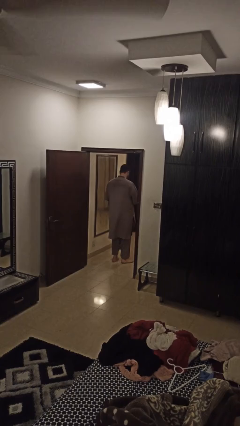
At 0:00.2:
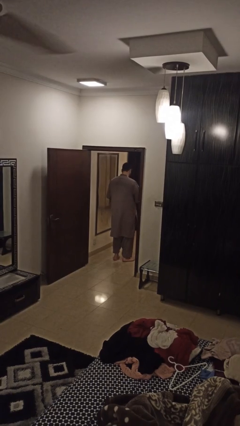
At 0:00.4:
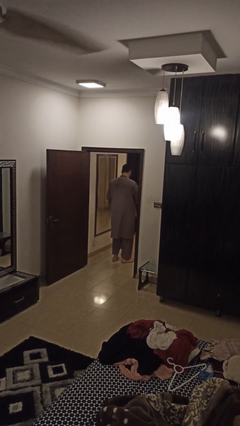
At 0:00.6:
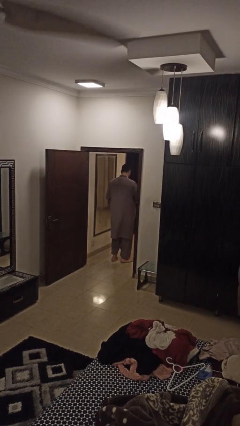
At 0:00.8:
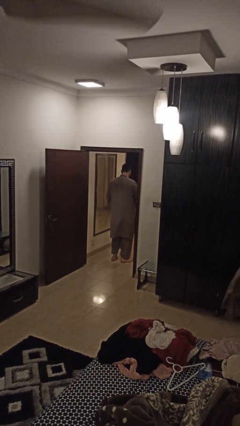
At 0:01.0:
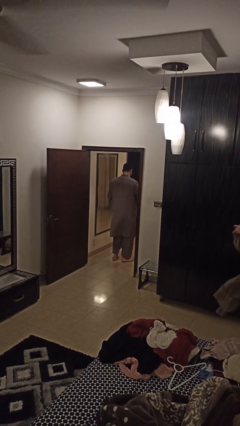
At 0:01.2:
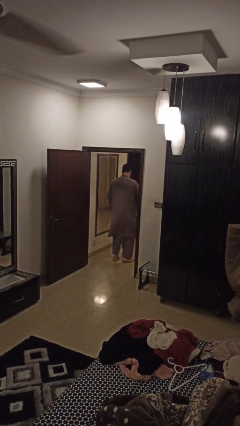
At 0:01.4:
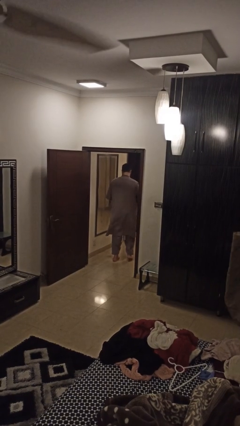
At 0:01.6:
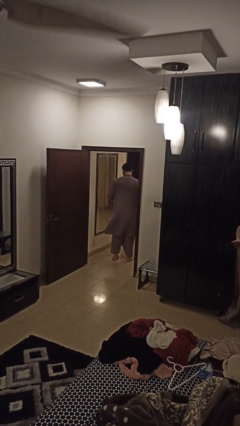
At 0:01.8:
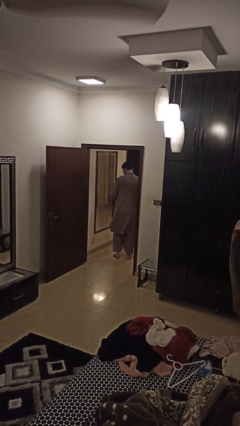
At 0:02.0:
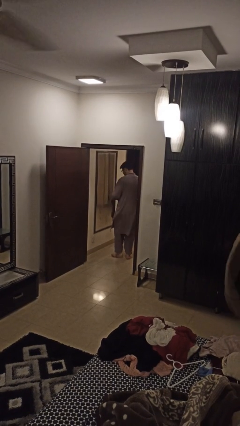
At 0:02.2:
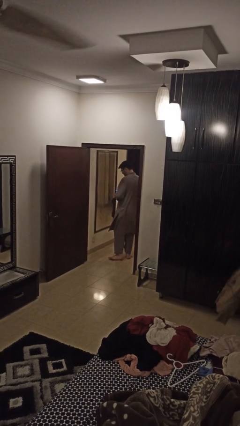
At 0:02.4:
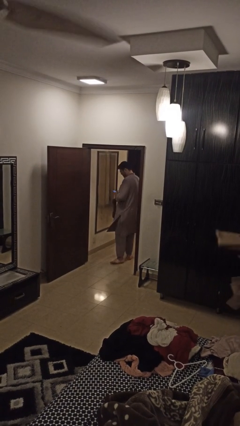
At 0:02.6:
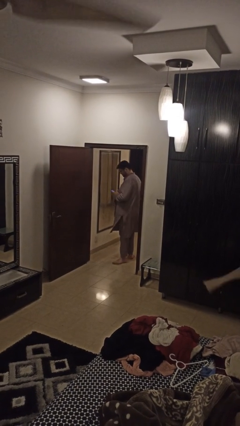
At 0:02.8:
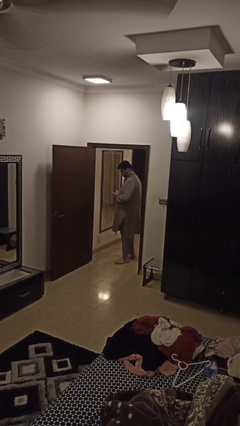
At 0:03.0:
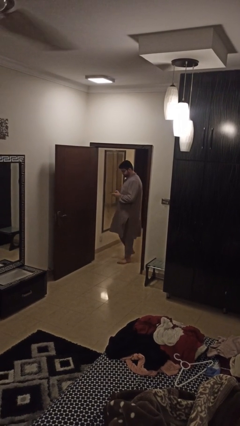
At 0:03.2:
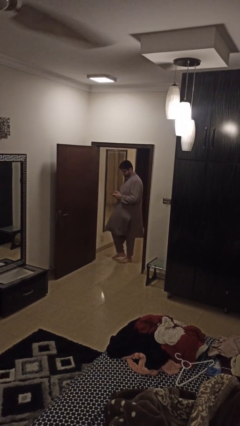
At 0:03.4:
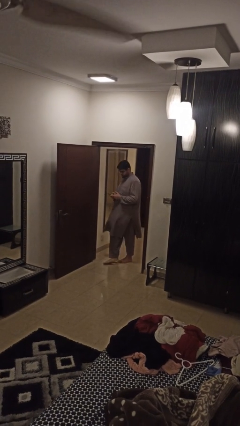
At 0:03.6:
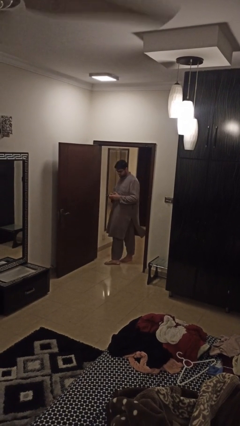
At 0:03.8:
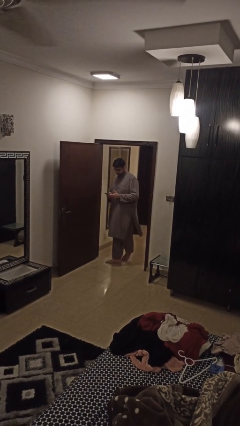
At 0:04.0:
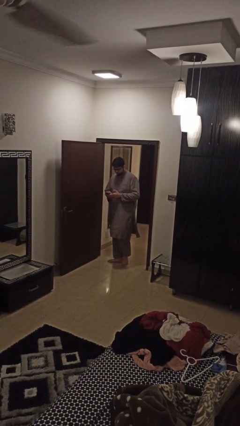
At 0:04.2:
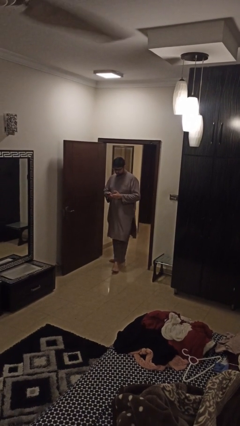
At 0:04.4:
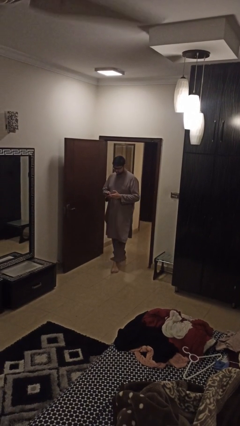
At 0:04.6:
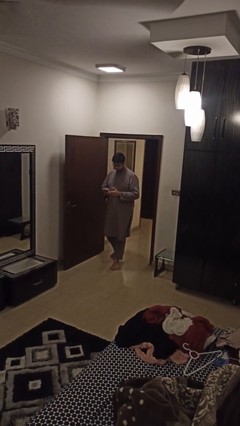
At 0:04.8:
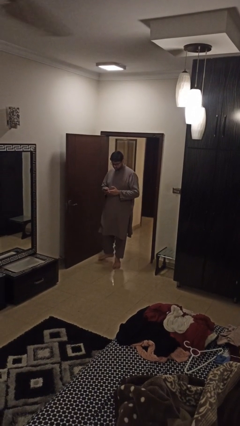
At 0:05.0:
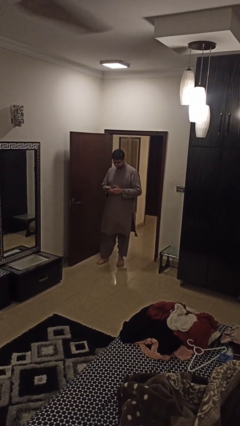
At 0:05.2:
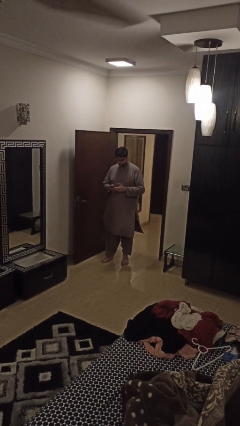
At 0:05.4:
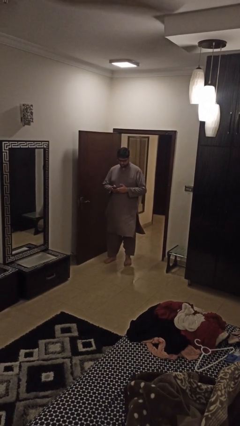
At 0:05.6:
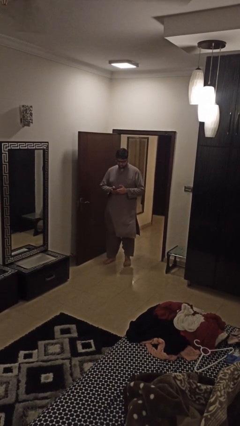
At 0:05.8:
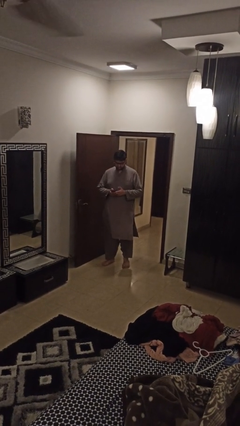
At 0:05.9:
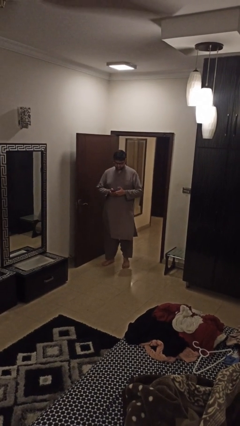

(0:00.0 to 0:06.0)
person enters scene through structure

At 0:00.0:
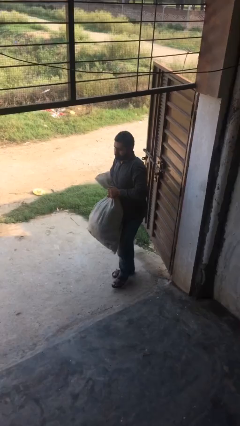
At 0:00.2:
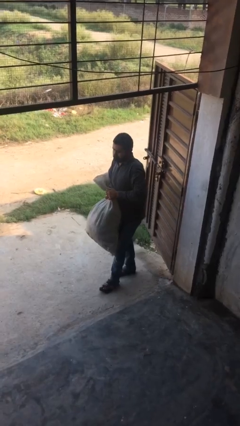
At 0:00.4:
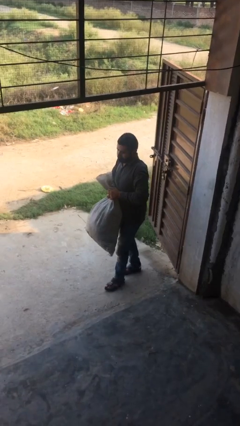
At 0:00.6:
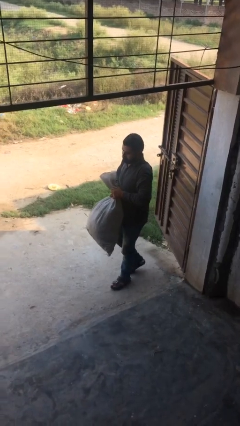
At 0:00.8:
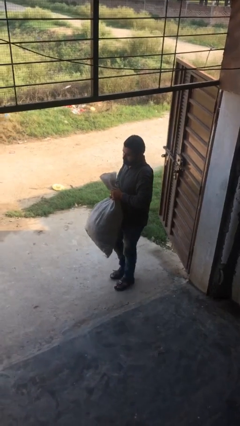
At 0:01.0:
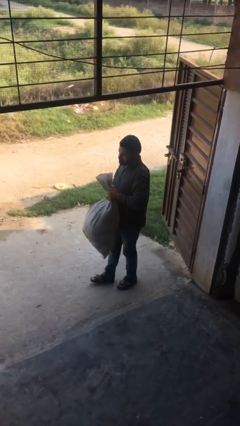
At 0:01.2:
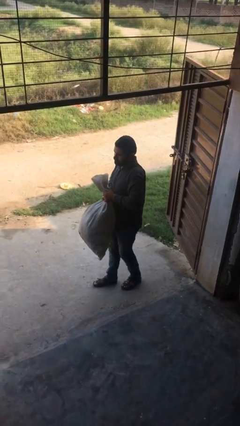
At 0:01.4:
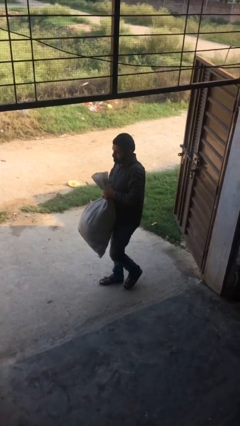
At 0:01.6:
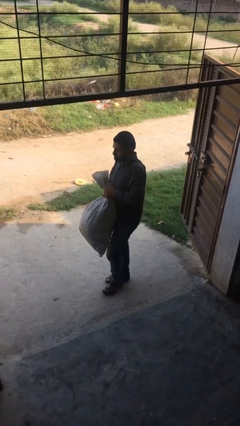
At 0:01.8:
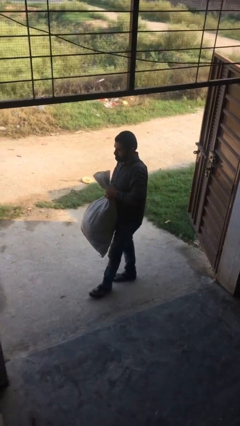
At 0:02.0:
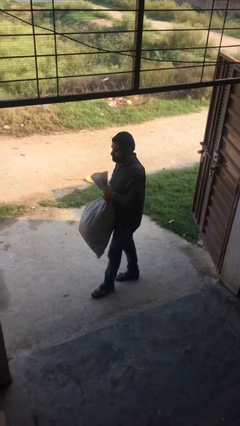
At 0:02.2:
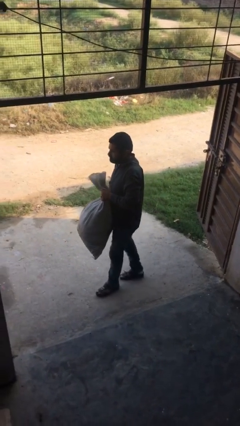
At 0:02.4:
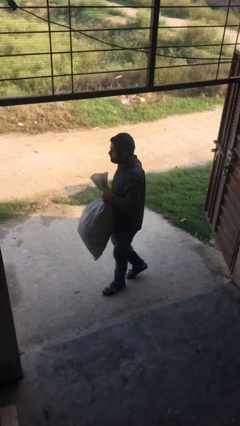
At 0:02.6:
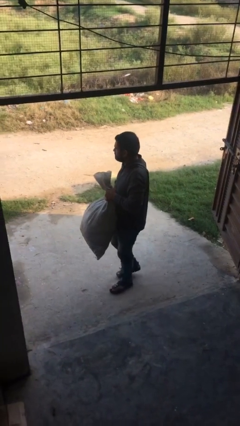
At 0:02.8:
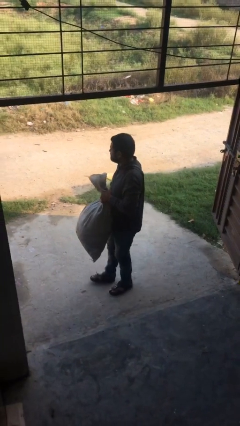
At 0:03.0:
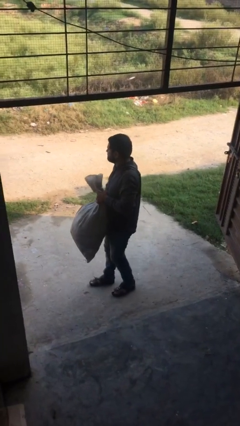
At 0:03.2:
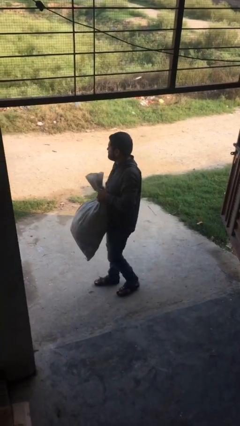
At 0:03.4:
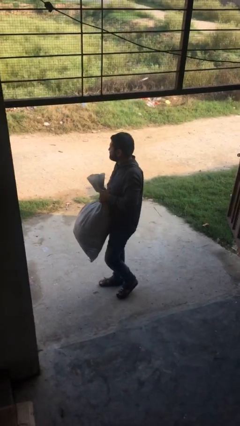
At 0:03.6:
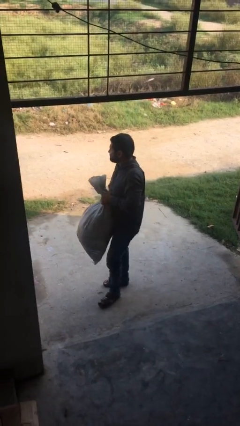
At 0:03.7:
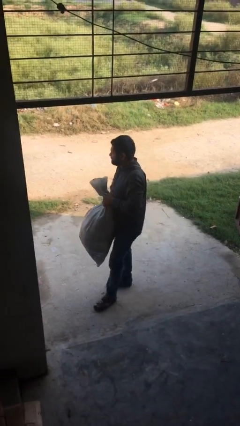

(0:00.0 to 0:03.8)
person carries heavy object

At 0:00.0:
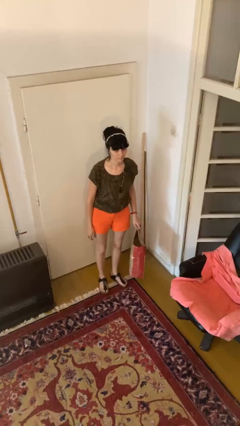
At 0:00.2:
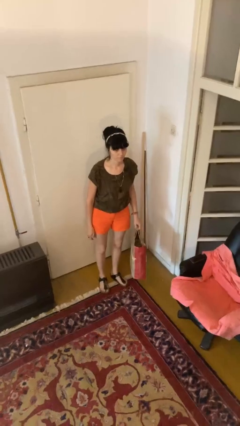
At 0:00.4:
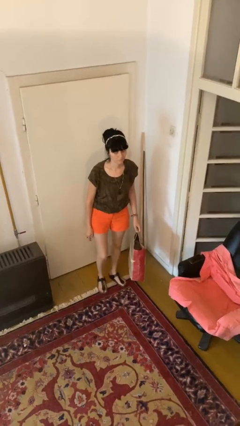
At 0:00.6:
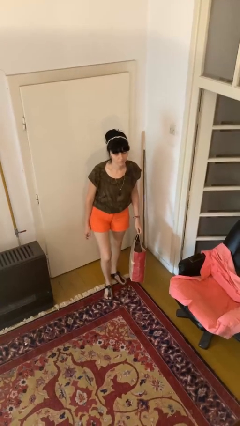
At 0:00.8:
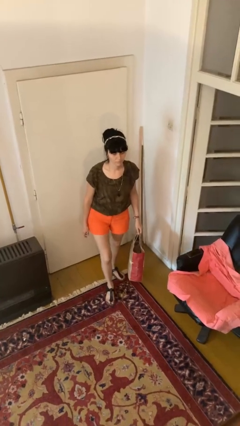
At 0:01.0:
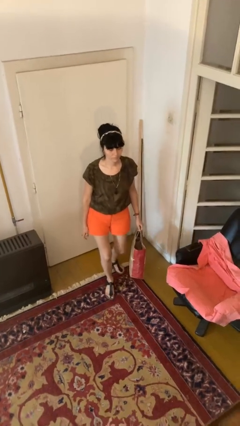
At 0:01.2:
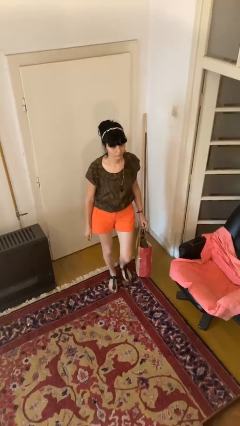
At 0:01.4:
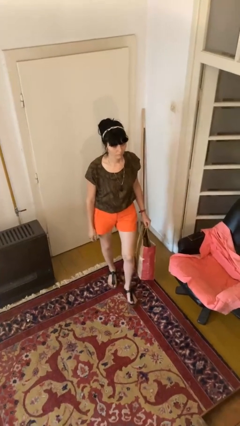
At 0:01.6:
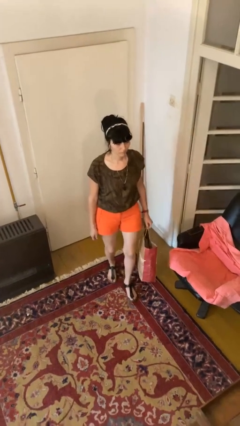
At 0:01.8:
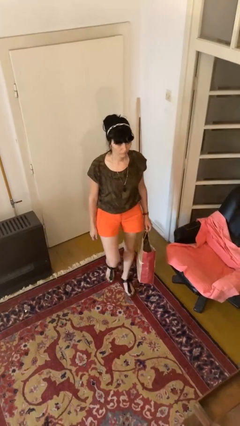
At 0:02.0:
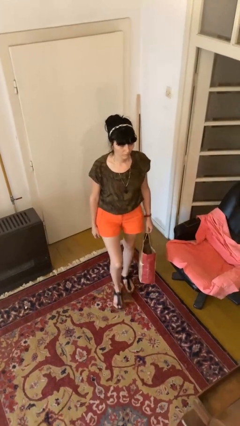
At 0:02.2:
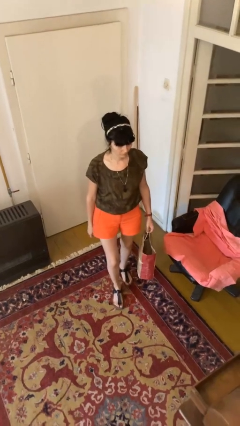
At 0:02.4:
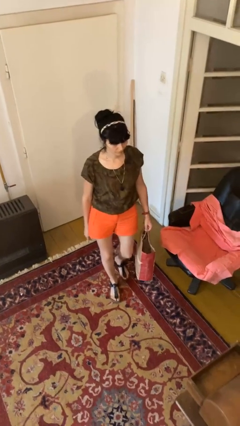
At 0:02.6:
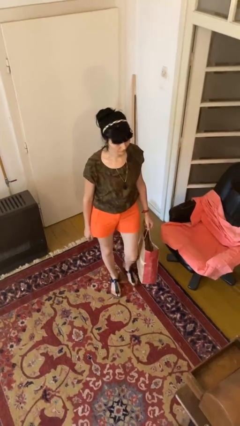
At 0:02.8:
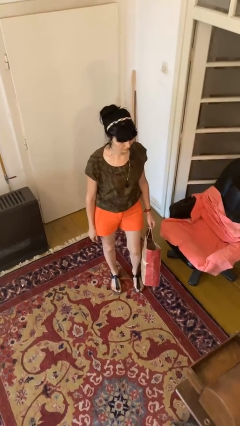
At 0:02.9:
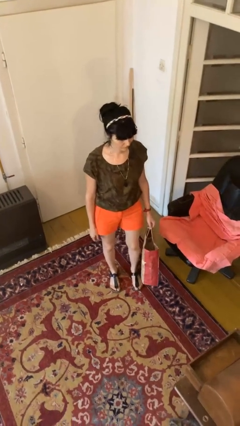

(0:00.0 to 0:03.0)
person carries groceries

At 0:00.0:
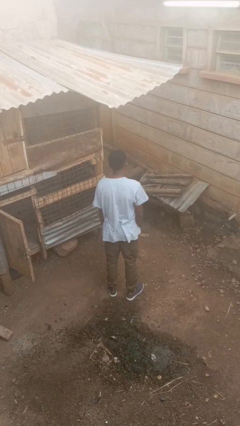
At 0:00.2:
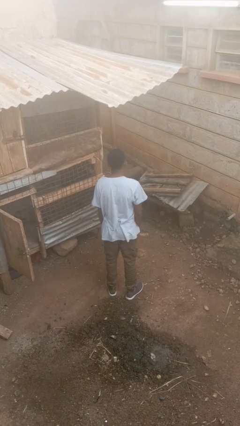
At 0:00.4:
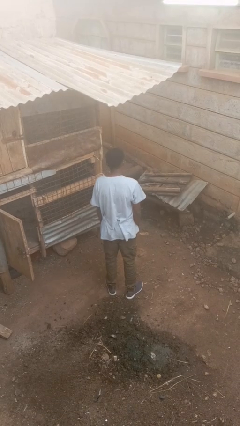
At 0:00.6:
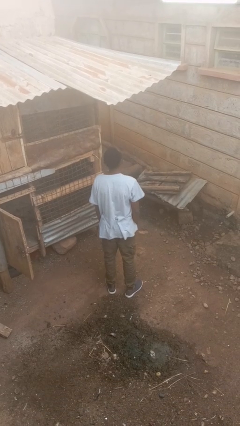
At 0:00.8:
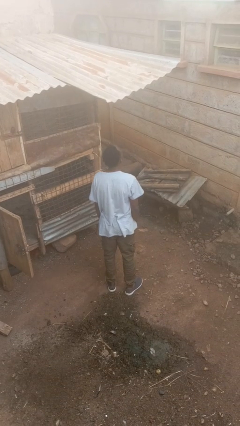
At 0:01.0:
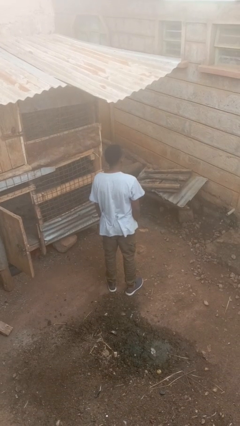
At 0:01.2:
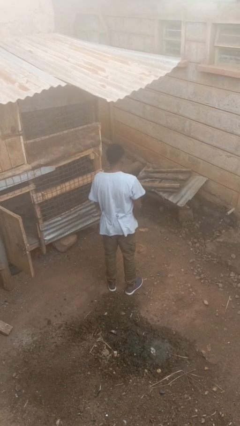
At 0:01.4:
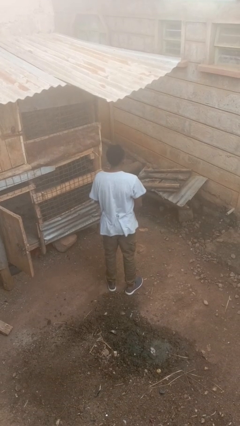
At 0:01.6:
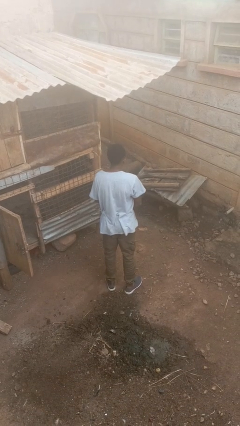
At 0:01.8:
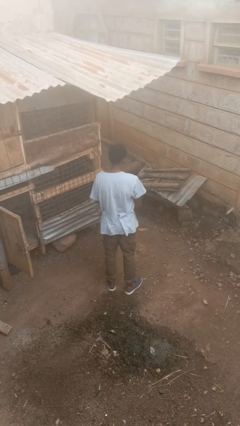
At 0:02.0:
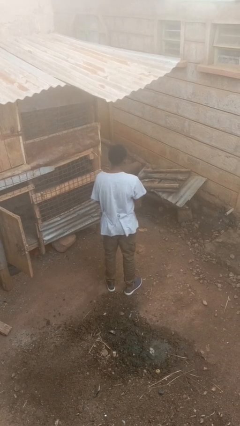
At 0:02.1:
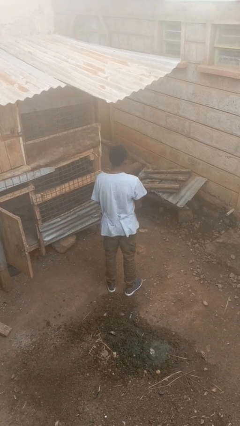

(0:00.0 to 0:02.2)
person nods head

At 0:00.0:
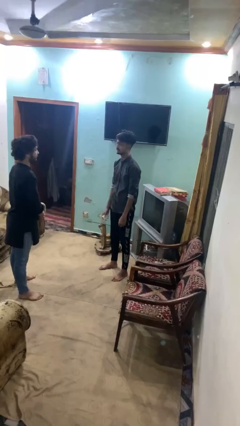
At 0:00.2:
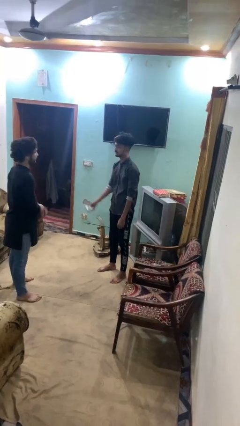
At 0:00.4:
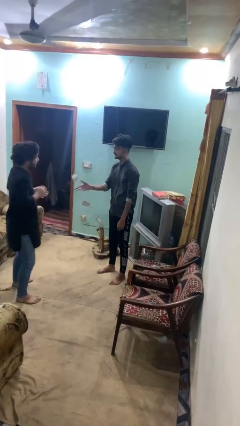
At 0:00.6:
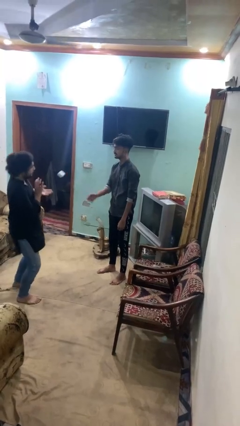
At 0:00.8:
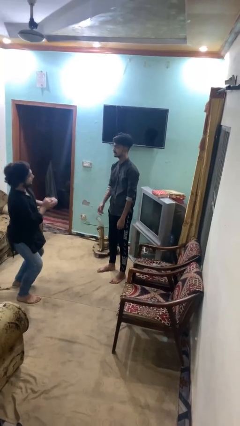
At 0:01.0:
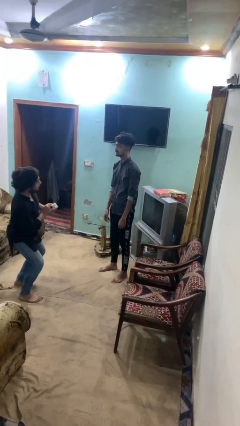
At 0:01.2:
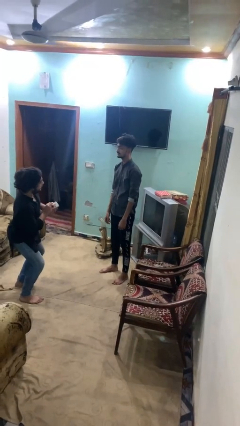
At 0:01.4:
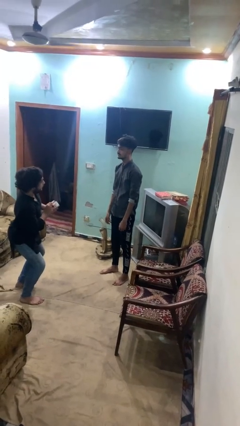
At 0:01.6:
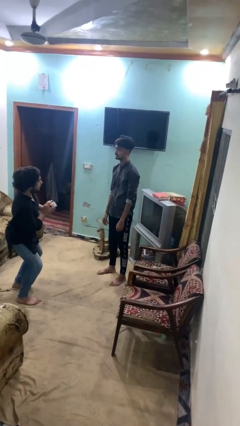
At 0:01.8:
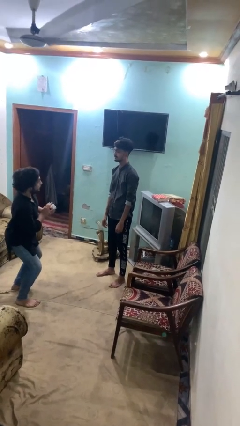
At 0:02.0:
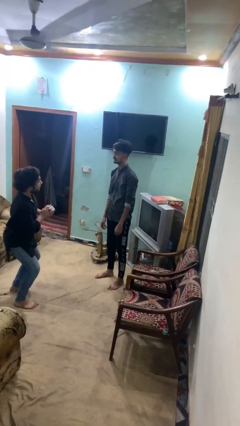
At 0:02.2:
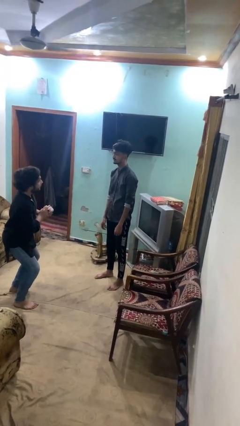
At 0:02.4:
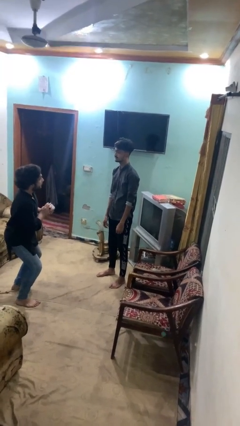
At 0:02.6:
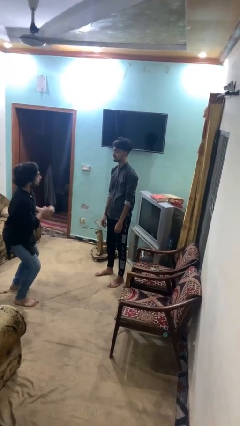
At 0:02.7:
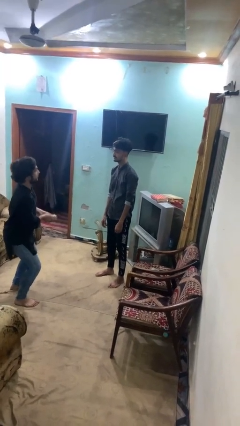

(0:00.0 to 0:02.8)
person throws object to person
